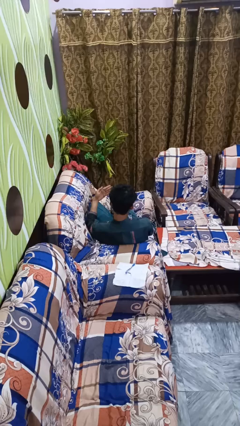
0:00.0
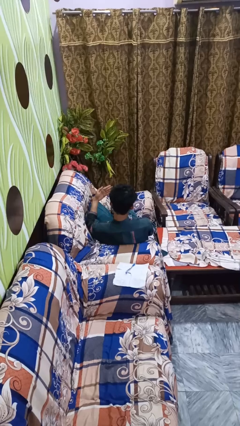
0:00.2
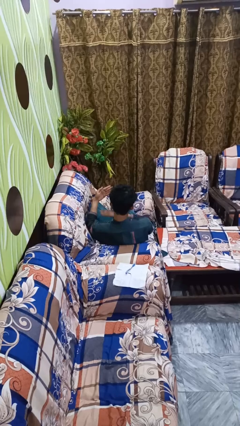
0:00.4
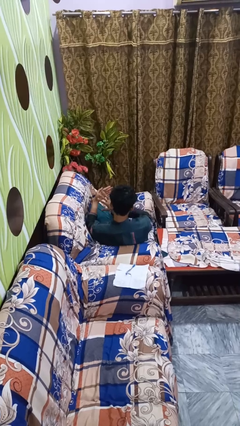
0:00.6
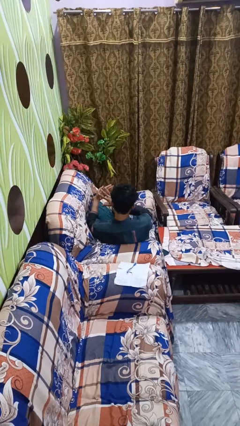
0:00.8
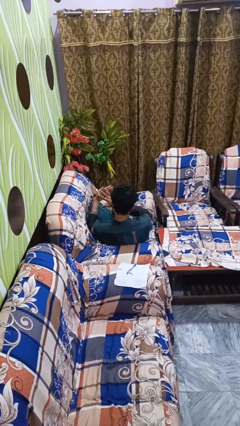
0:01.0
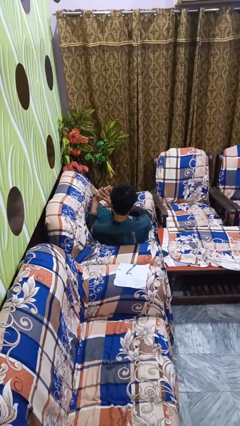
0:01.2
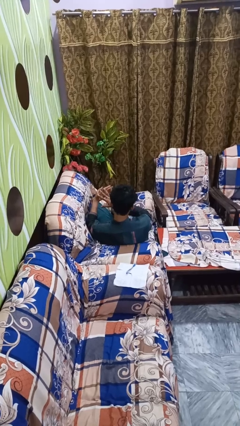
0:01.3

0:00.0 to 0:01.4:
person gestures number five

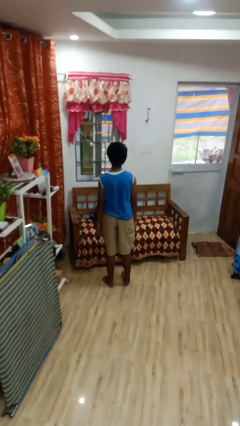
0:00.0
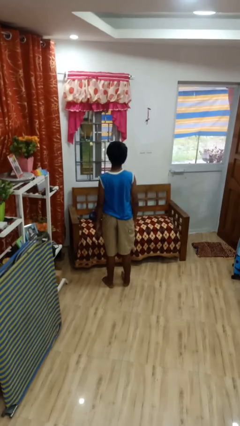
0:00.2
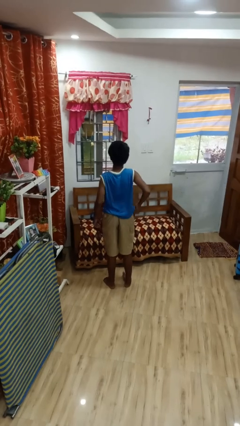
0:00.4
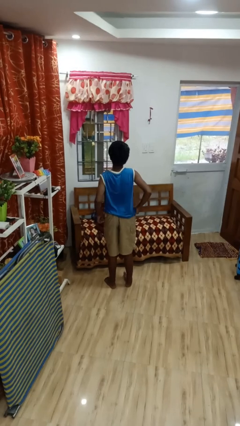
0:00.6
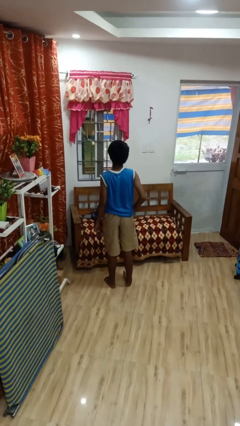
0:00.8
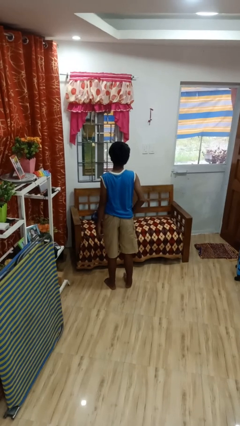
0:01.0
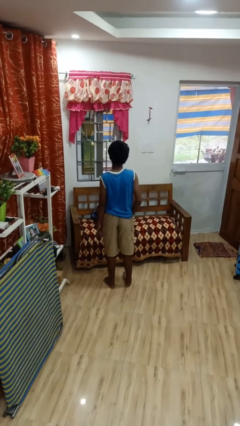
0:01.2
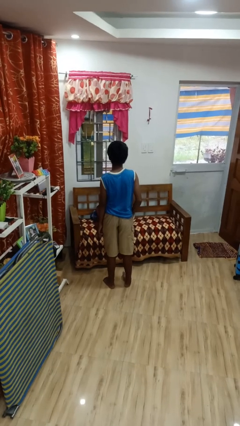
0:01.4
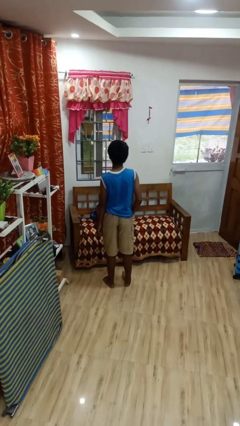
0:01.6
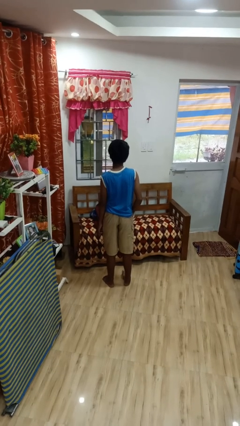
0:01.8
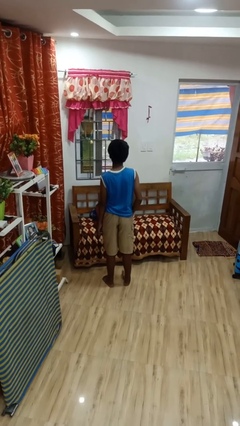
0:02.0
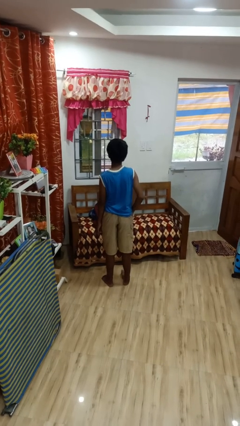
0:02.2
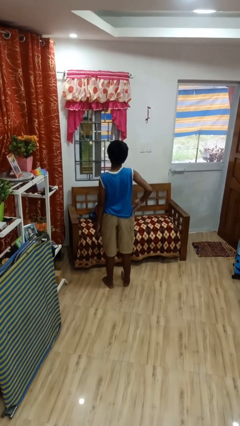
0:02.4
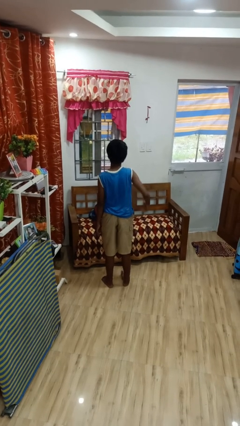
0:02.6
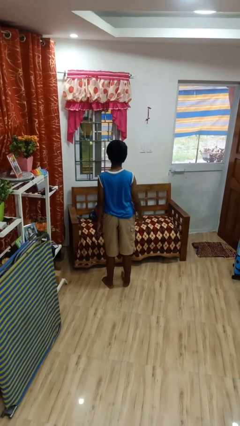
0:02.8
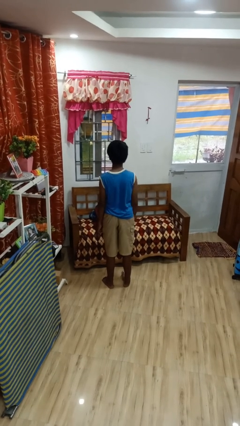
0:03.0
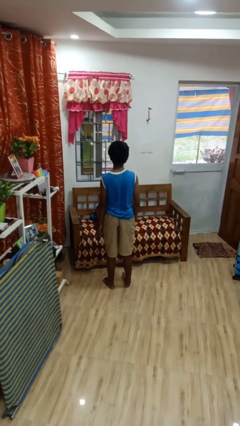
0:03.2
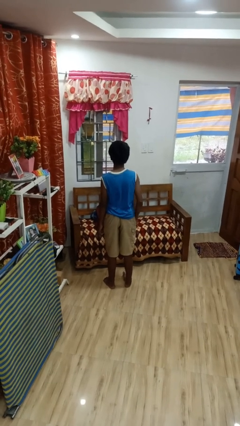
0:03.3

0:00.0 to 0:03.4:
person puts hands in back pockets

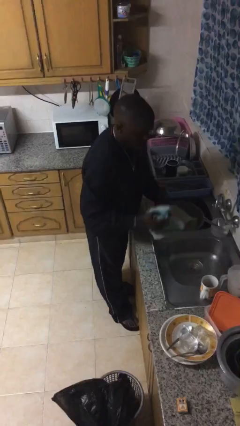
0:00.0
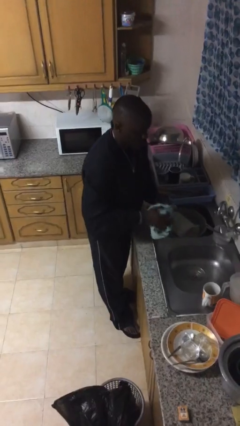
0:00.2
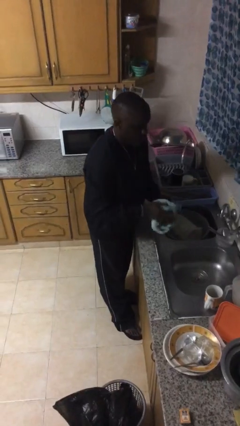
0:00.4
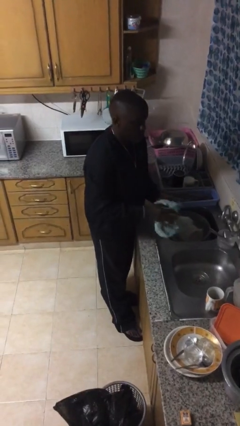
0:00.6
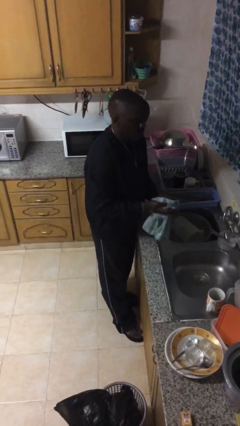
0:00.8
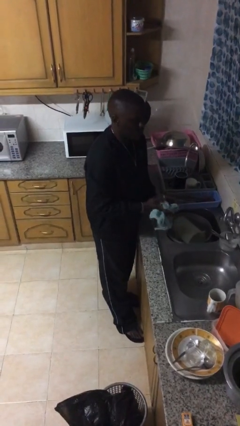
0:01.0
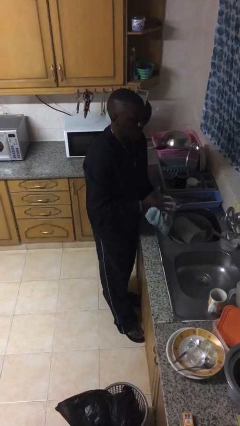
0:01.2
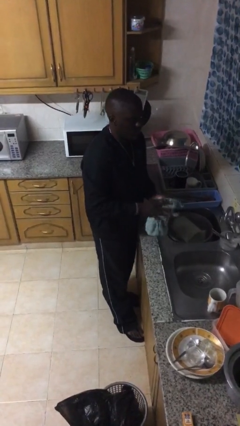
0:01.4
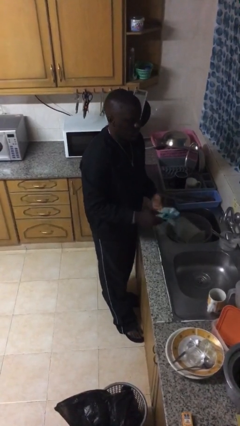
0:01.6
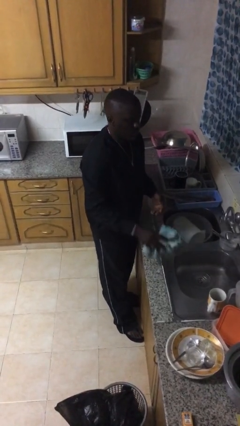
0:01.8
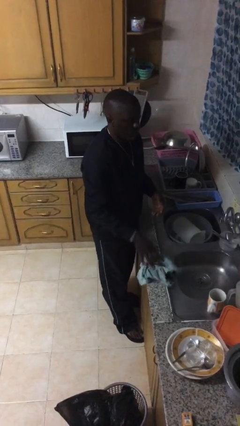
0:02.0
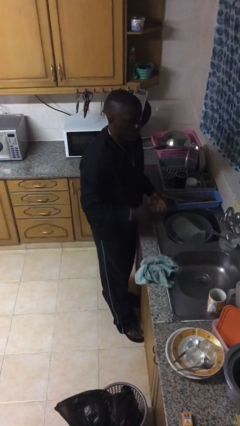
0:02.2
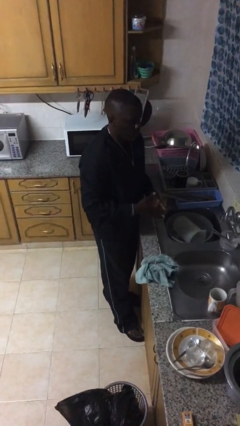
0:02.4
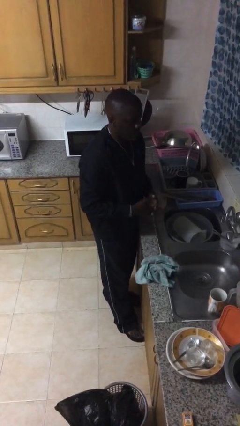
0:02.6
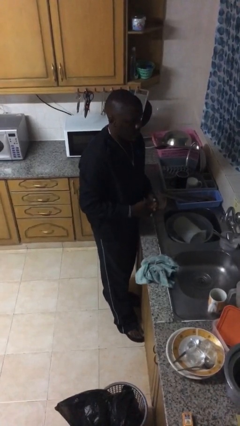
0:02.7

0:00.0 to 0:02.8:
person dries hands with towel

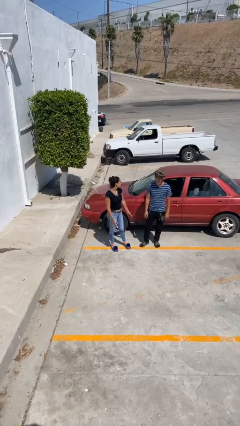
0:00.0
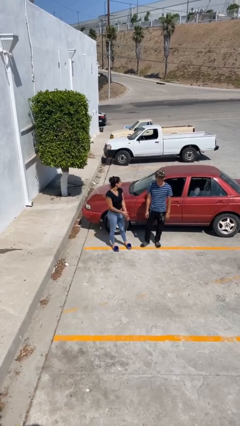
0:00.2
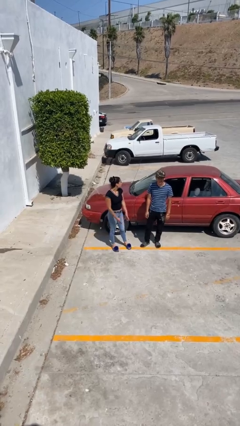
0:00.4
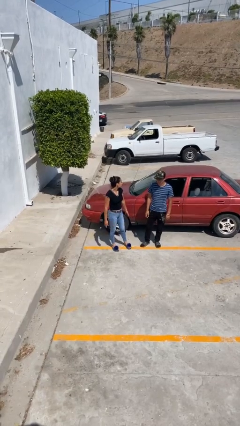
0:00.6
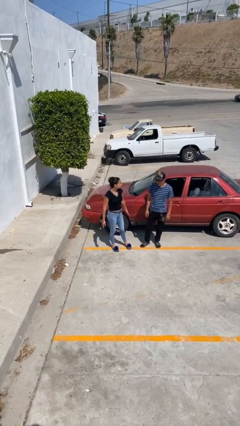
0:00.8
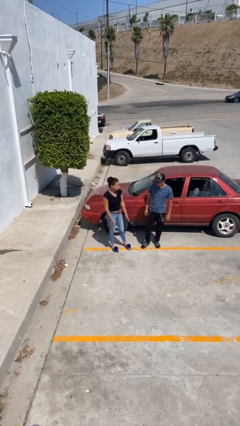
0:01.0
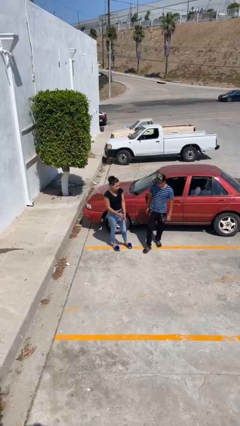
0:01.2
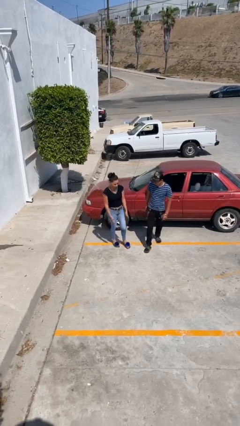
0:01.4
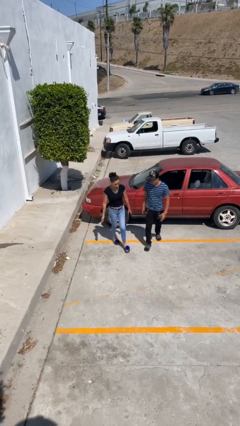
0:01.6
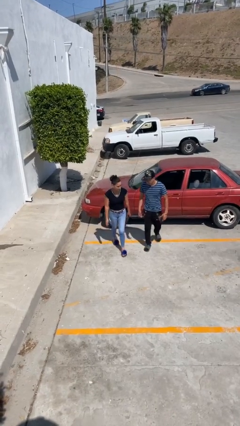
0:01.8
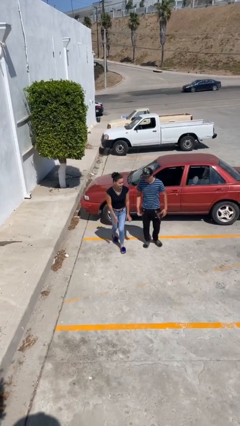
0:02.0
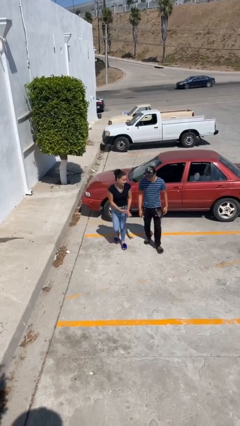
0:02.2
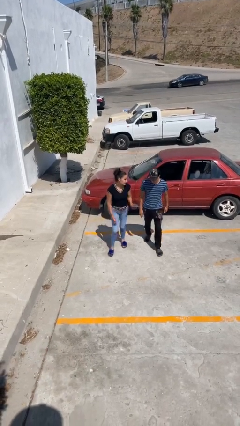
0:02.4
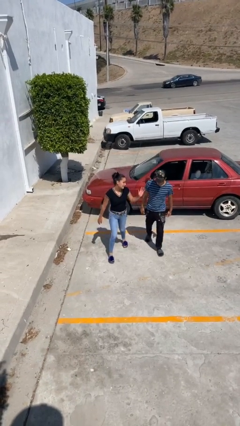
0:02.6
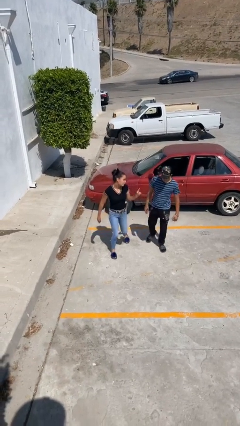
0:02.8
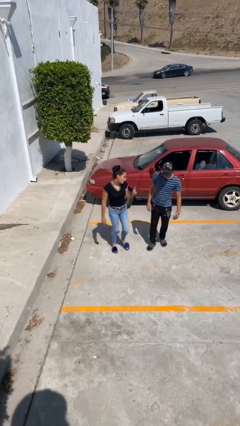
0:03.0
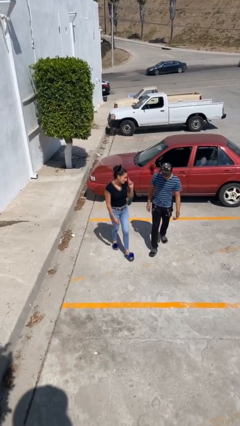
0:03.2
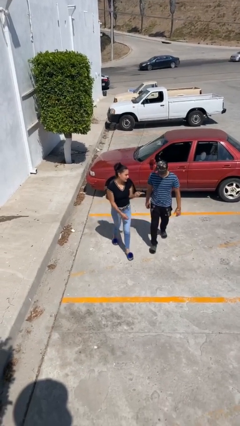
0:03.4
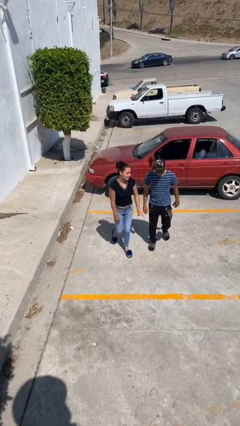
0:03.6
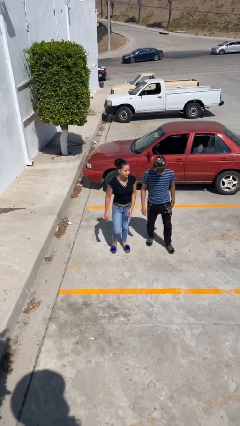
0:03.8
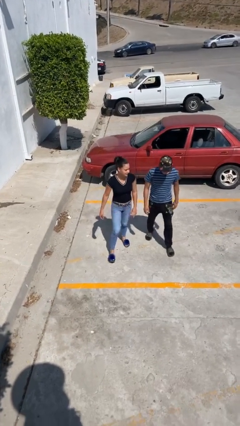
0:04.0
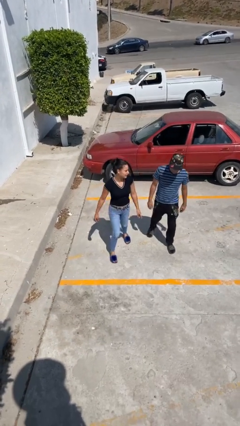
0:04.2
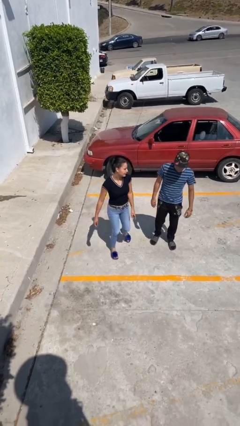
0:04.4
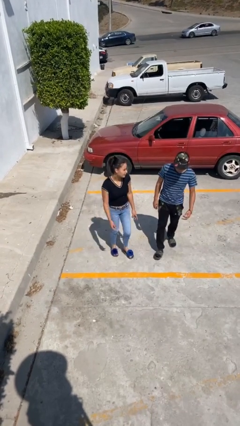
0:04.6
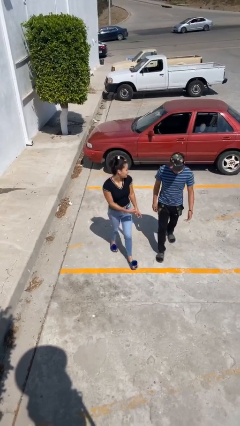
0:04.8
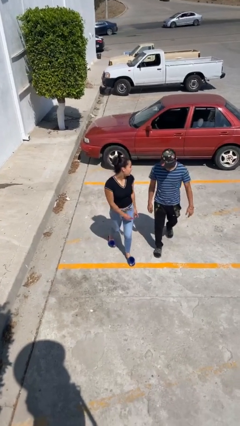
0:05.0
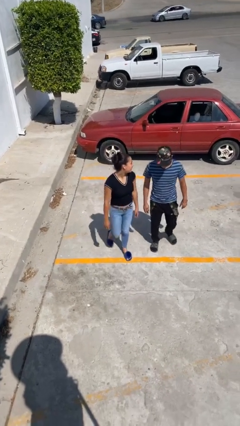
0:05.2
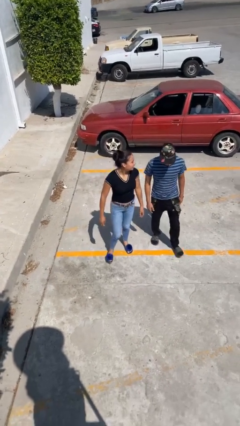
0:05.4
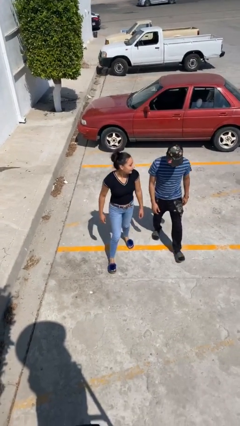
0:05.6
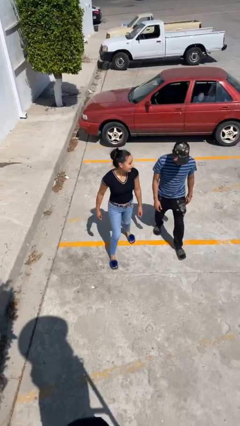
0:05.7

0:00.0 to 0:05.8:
person talks to person

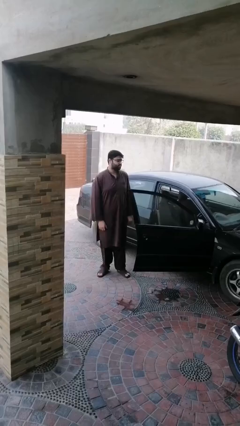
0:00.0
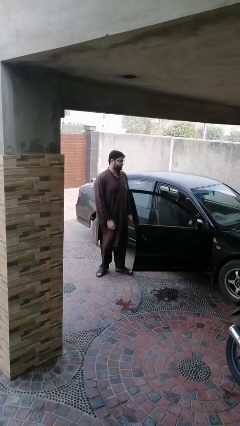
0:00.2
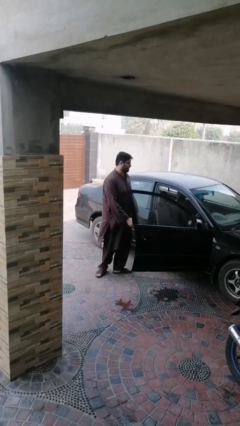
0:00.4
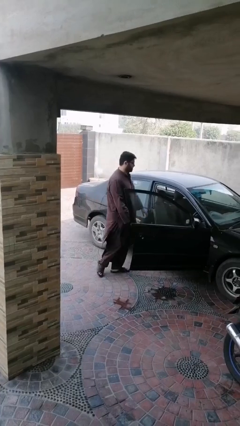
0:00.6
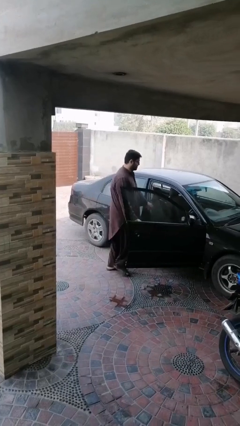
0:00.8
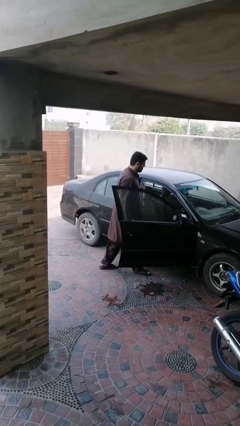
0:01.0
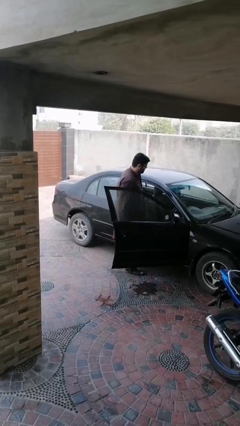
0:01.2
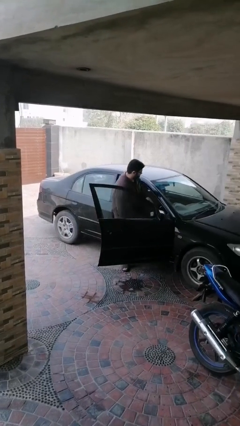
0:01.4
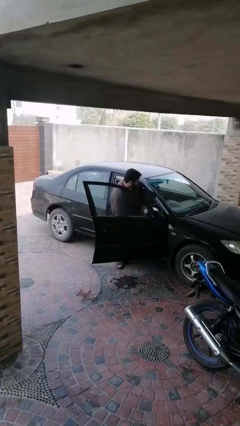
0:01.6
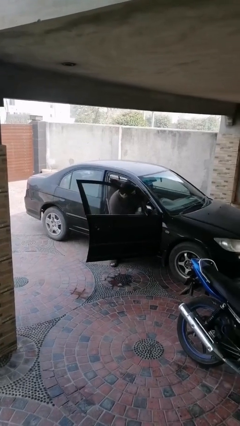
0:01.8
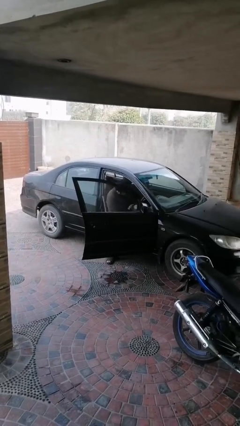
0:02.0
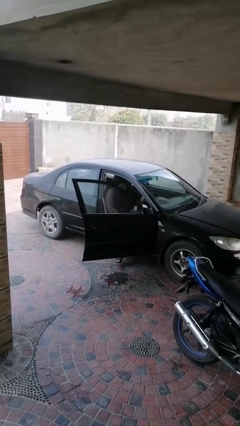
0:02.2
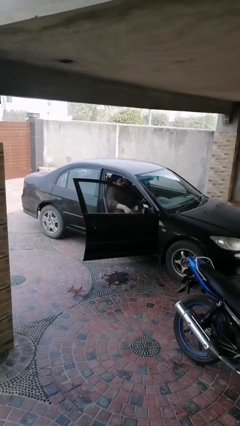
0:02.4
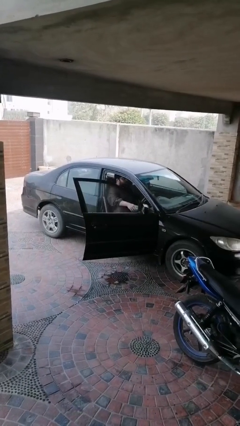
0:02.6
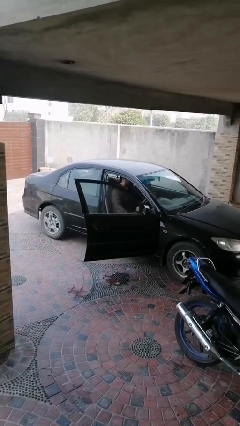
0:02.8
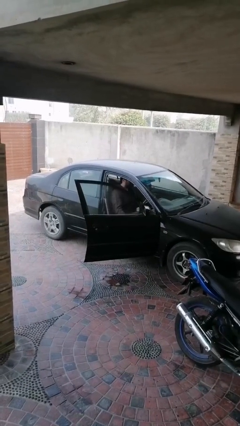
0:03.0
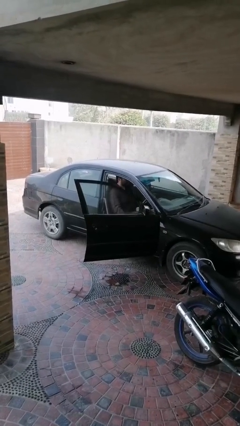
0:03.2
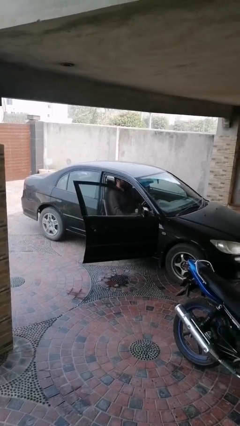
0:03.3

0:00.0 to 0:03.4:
person enters car

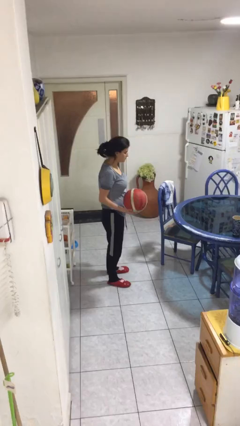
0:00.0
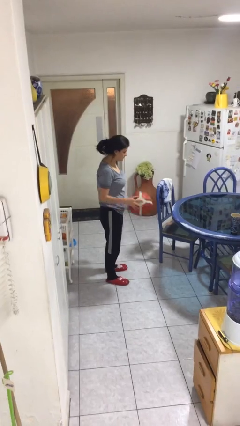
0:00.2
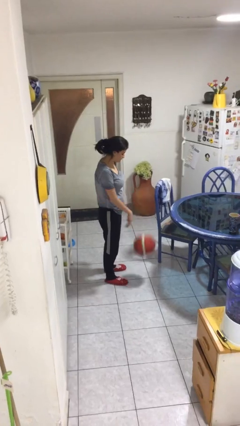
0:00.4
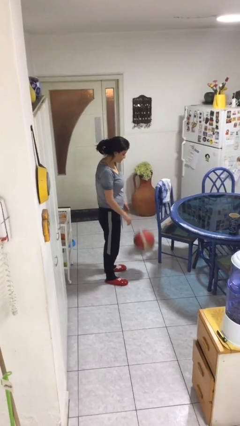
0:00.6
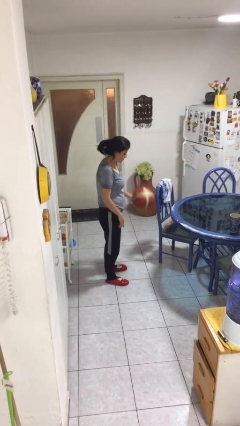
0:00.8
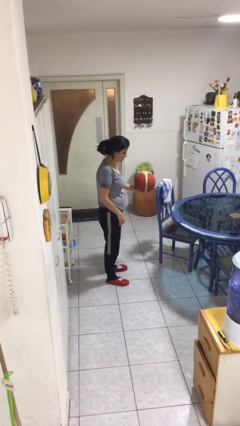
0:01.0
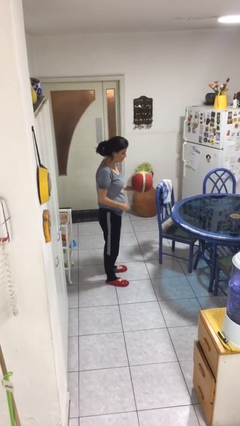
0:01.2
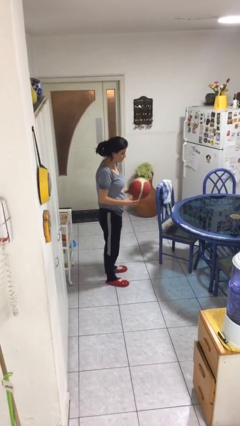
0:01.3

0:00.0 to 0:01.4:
person bounces ball on floor
